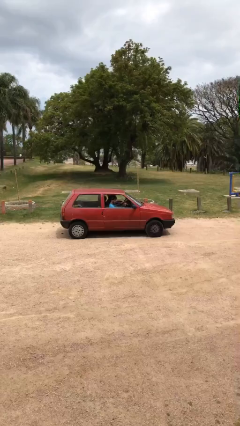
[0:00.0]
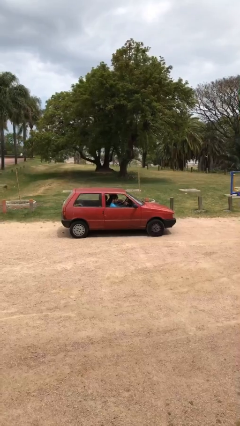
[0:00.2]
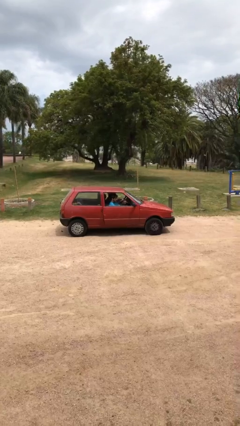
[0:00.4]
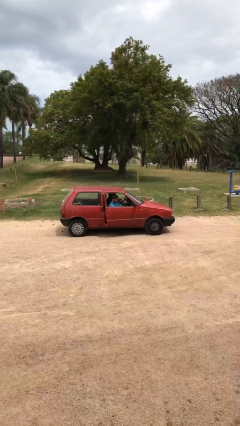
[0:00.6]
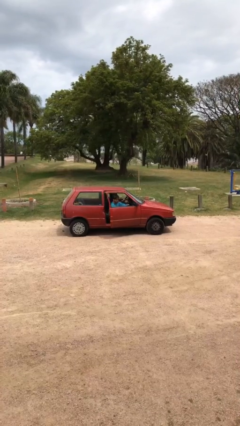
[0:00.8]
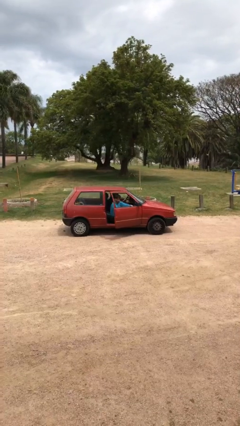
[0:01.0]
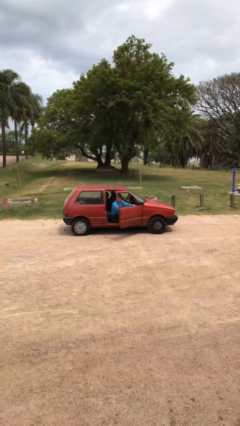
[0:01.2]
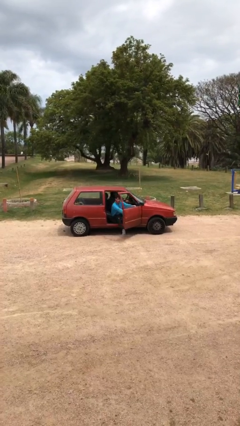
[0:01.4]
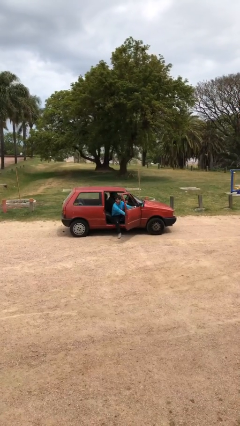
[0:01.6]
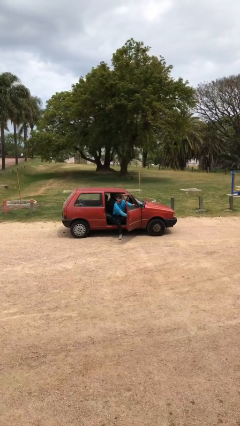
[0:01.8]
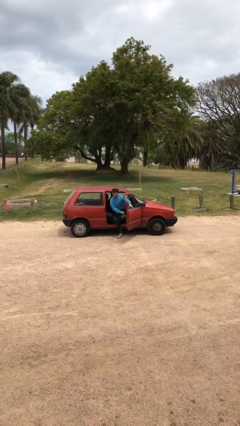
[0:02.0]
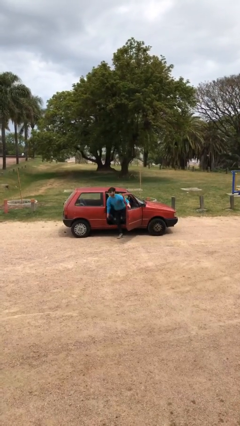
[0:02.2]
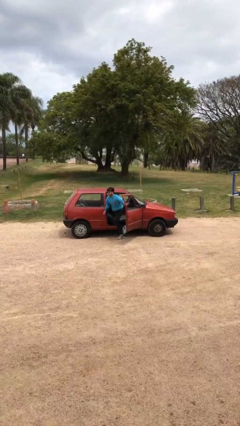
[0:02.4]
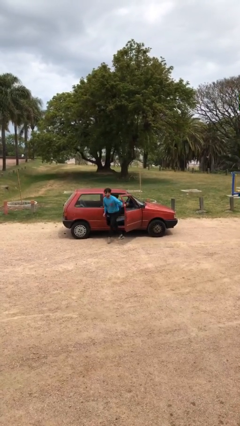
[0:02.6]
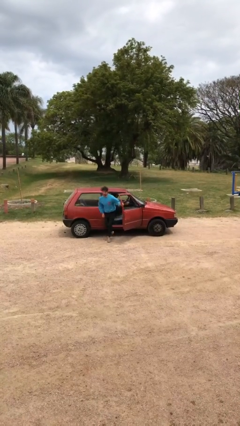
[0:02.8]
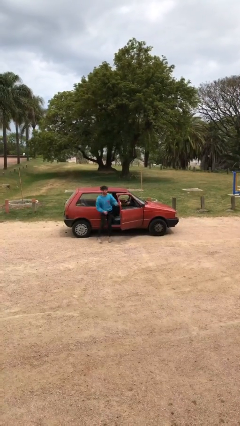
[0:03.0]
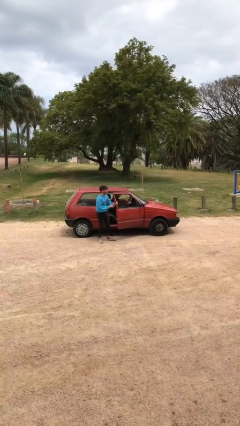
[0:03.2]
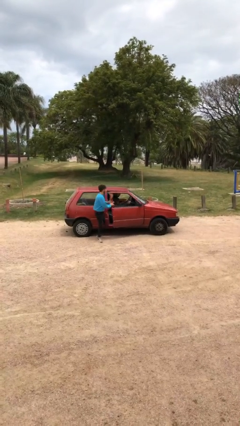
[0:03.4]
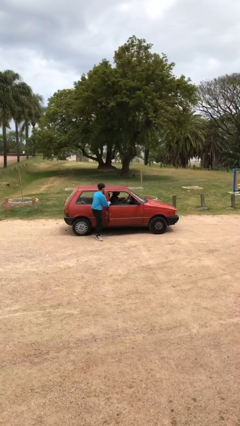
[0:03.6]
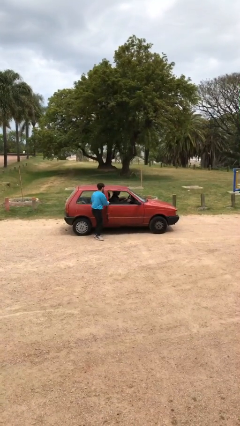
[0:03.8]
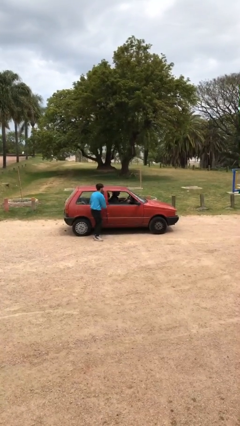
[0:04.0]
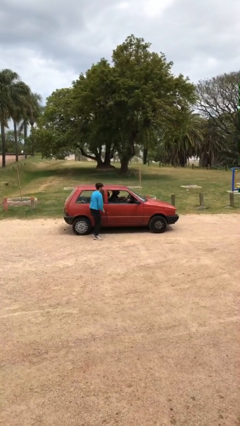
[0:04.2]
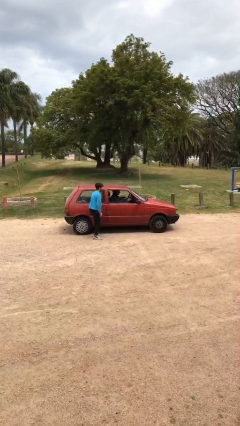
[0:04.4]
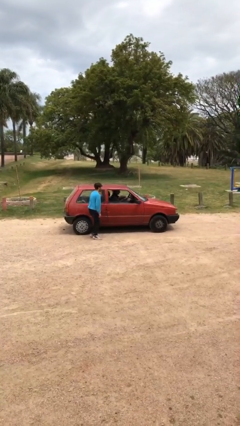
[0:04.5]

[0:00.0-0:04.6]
car drops off person

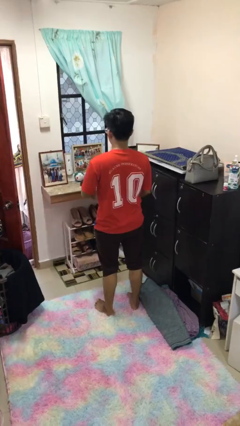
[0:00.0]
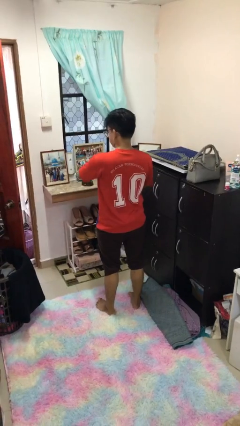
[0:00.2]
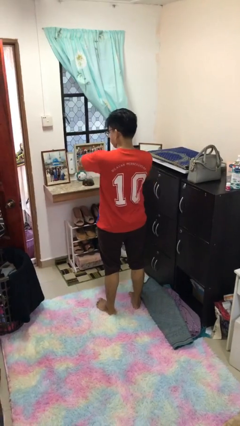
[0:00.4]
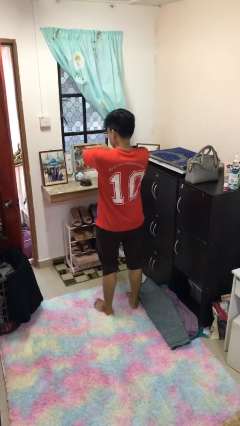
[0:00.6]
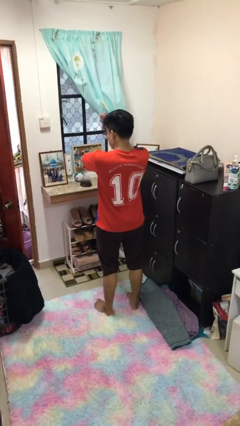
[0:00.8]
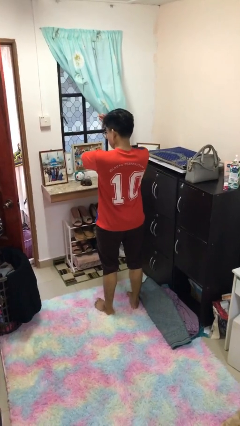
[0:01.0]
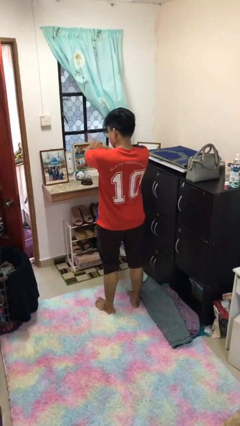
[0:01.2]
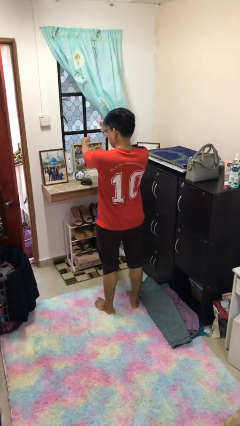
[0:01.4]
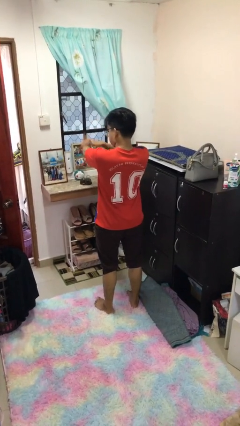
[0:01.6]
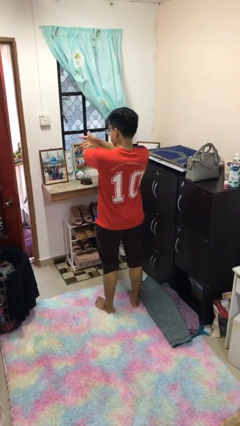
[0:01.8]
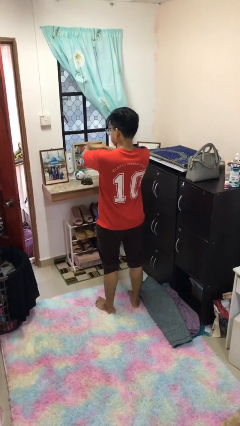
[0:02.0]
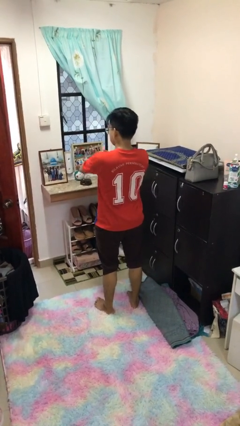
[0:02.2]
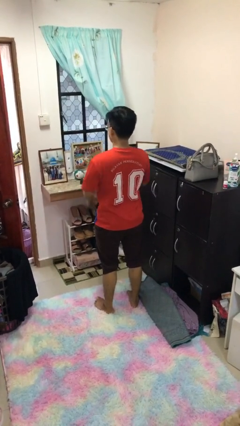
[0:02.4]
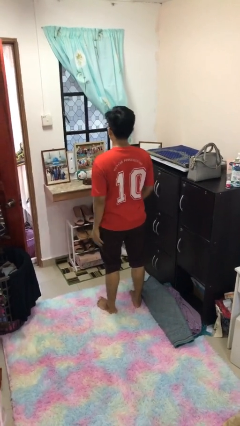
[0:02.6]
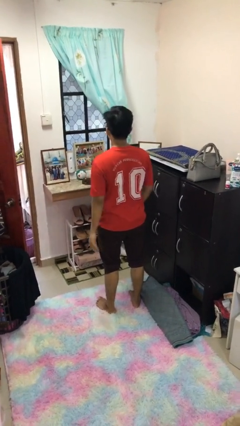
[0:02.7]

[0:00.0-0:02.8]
person swats bug

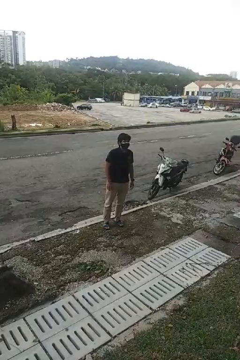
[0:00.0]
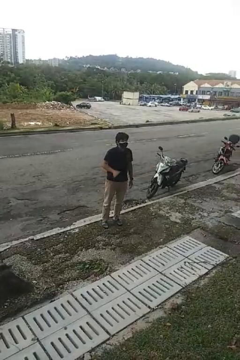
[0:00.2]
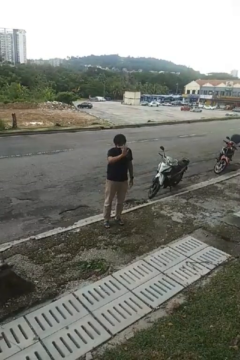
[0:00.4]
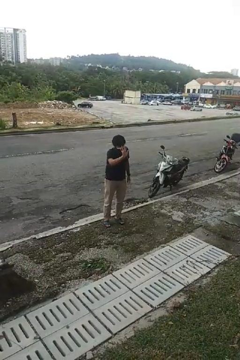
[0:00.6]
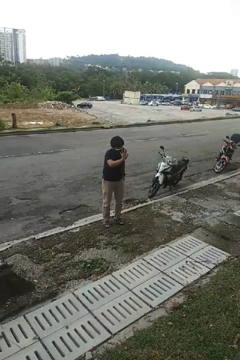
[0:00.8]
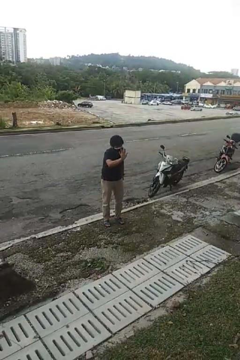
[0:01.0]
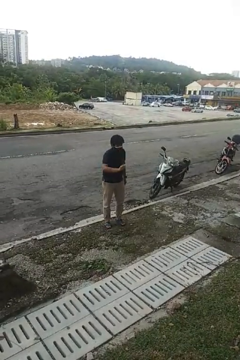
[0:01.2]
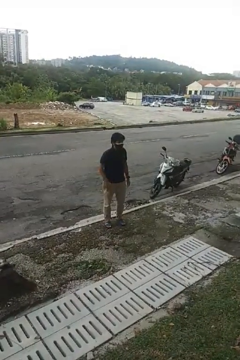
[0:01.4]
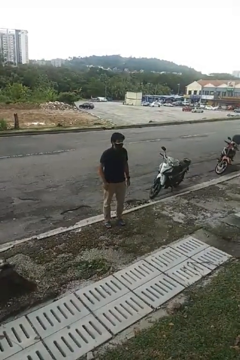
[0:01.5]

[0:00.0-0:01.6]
person gestures stop

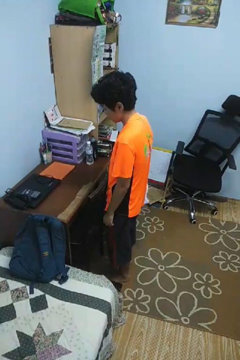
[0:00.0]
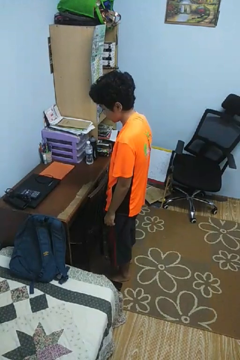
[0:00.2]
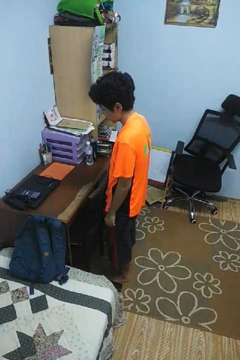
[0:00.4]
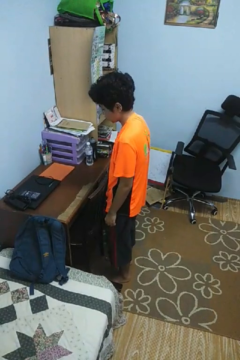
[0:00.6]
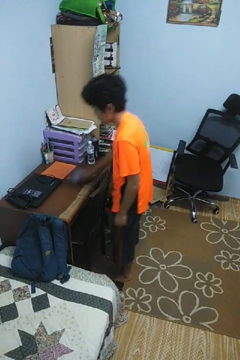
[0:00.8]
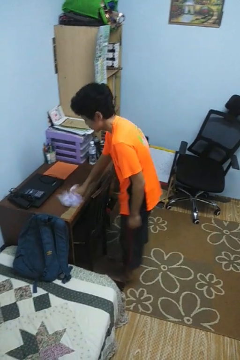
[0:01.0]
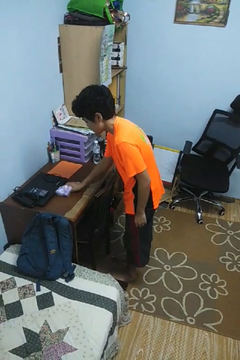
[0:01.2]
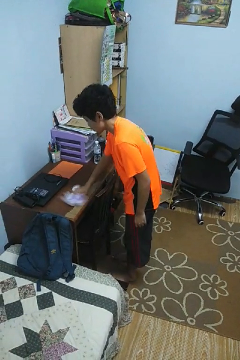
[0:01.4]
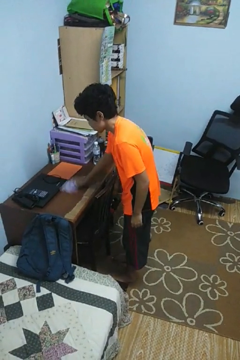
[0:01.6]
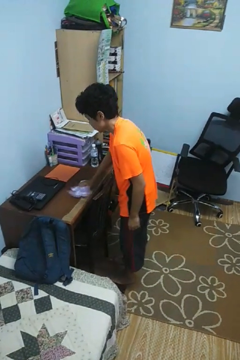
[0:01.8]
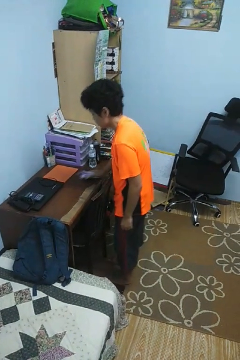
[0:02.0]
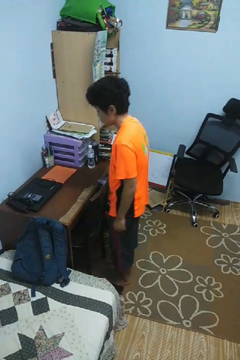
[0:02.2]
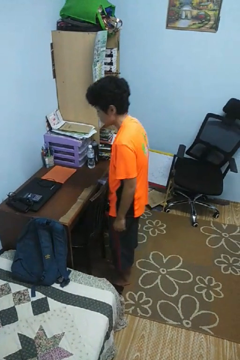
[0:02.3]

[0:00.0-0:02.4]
person cleans table with rag

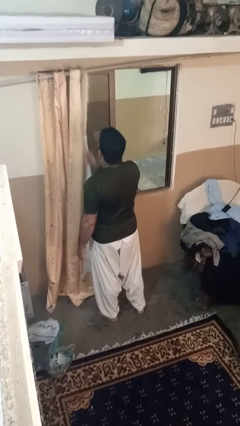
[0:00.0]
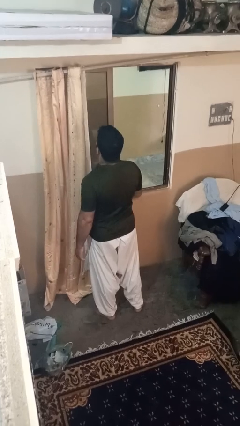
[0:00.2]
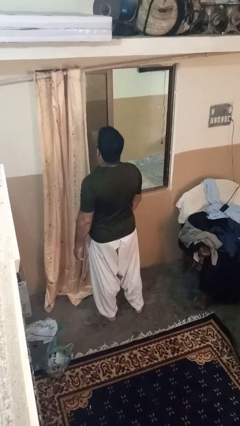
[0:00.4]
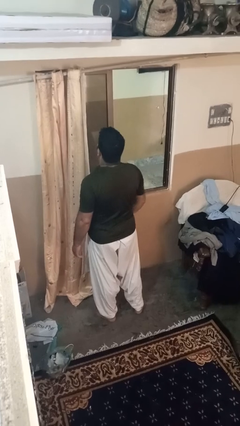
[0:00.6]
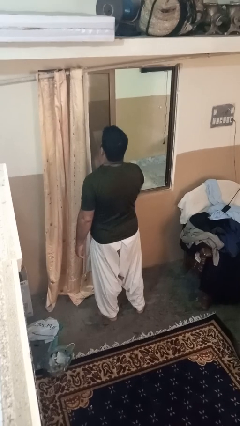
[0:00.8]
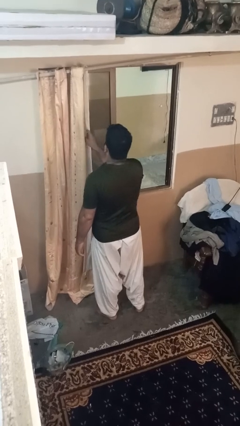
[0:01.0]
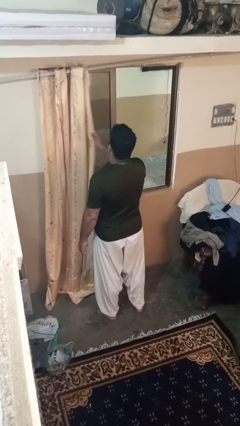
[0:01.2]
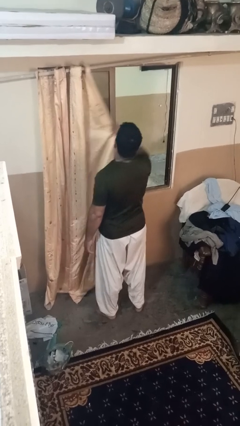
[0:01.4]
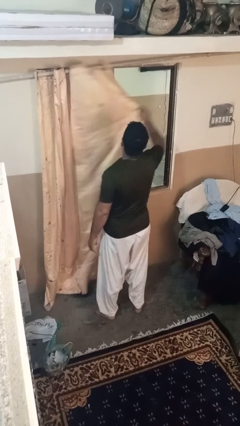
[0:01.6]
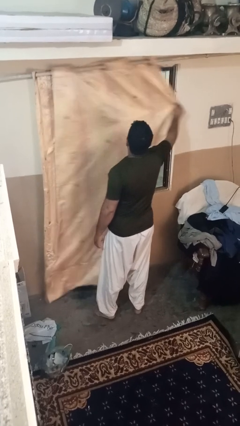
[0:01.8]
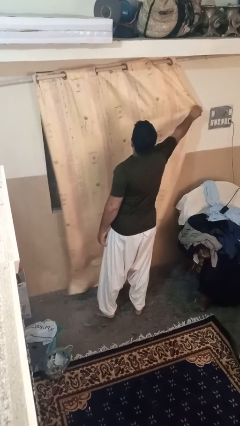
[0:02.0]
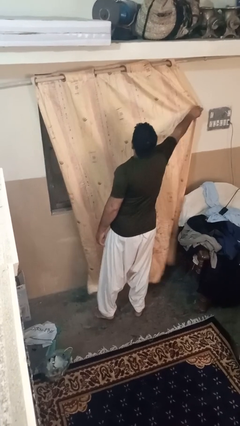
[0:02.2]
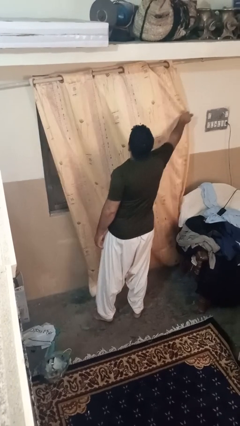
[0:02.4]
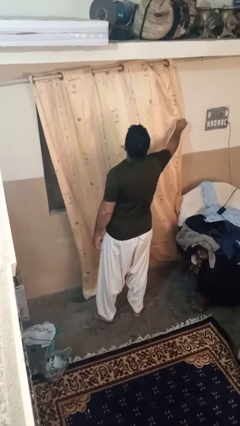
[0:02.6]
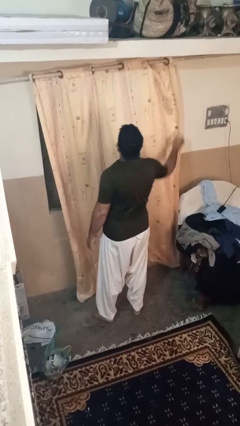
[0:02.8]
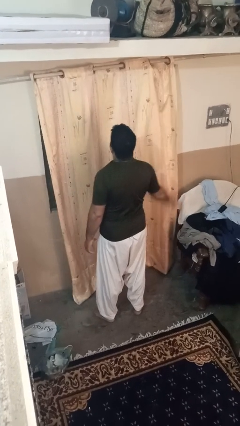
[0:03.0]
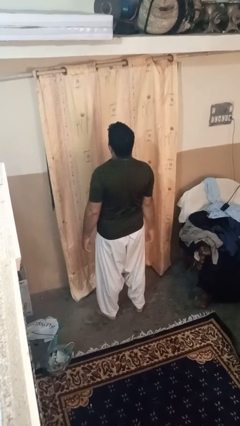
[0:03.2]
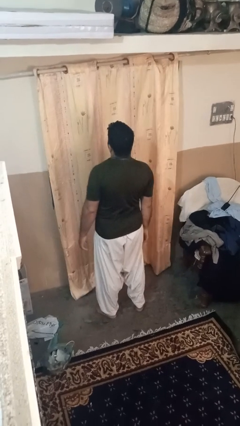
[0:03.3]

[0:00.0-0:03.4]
person closes curtains

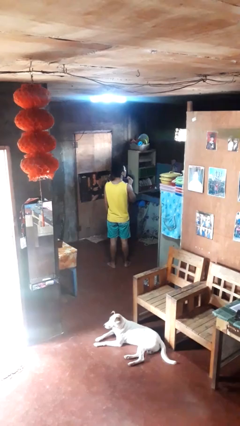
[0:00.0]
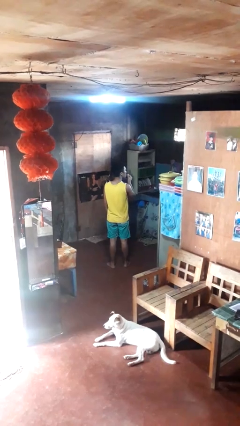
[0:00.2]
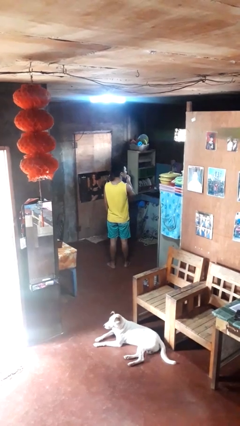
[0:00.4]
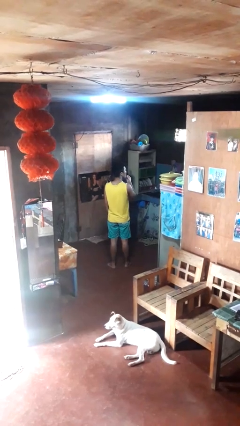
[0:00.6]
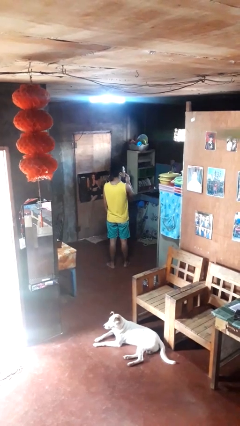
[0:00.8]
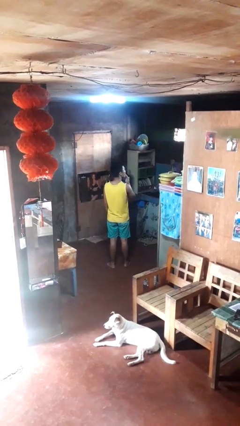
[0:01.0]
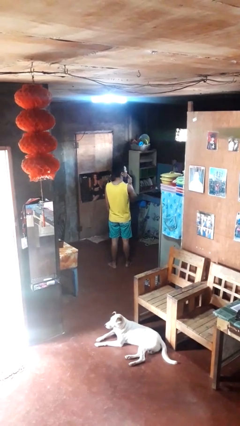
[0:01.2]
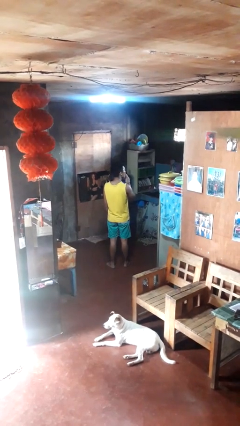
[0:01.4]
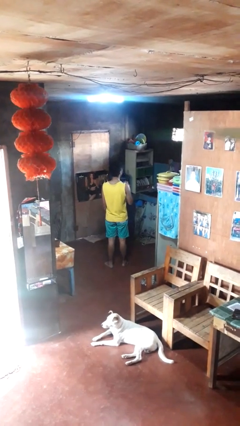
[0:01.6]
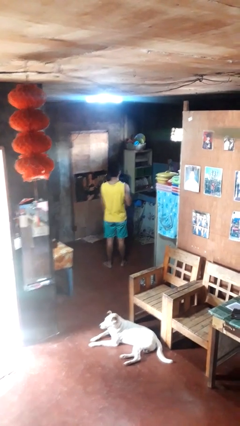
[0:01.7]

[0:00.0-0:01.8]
person licks fingers

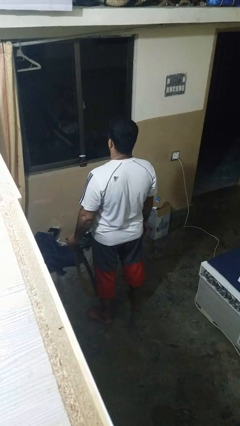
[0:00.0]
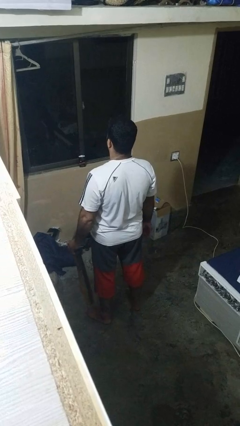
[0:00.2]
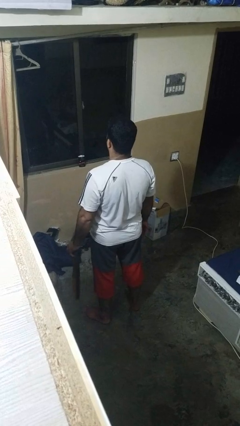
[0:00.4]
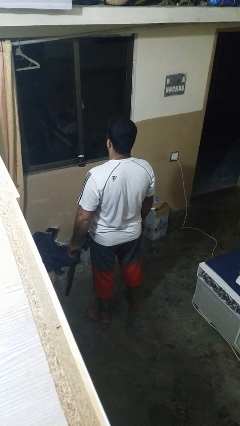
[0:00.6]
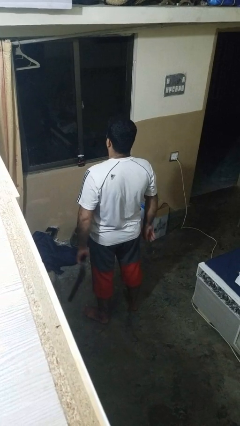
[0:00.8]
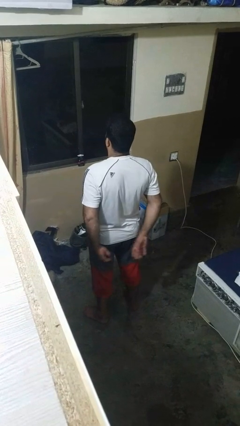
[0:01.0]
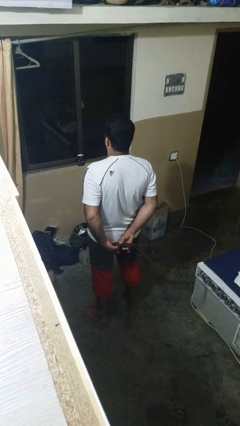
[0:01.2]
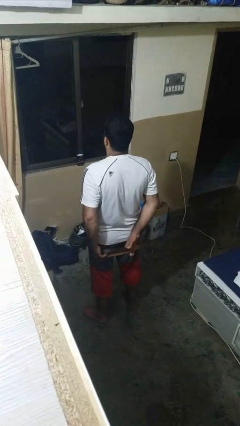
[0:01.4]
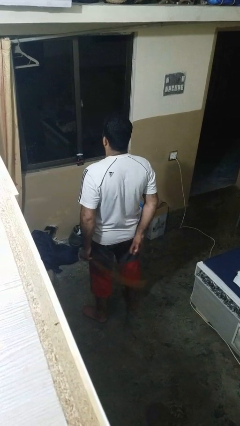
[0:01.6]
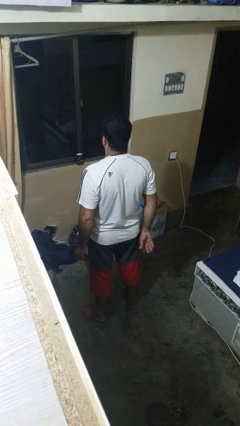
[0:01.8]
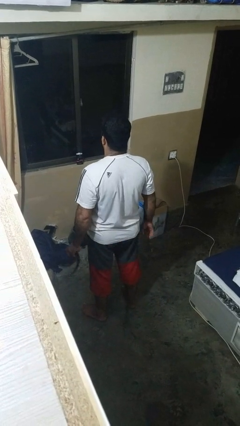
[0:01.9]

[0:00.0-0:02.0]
person takes off belt
